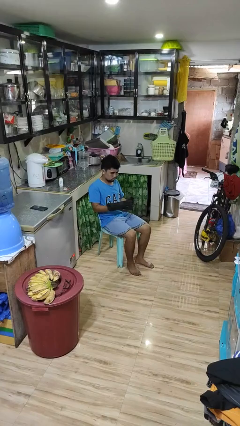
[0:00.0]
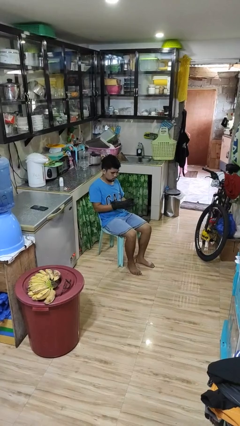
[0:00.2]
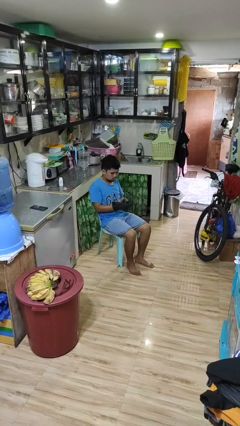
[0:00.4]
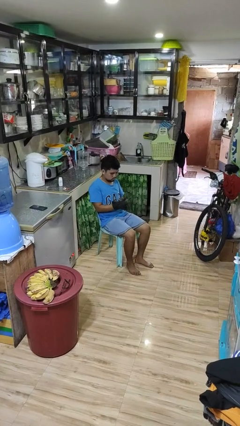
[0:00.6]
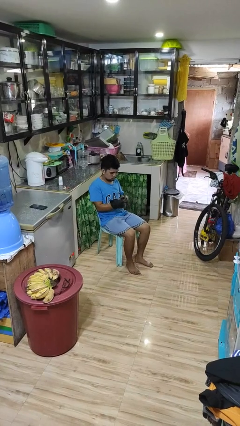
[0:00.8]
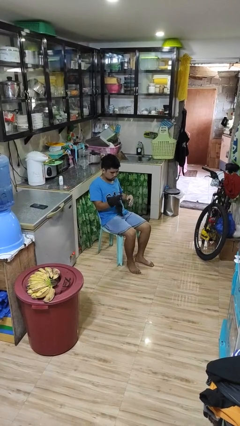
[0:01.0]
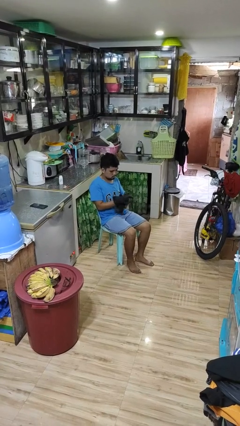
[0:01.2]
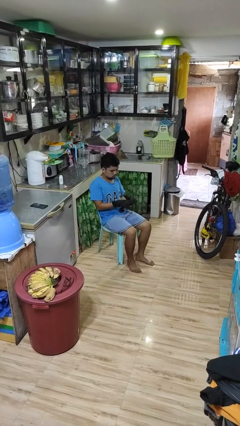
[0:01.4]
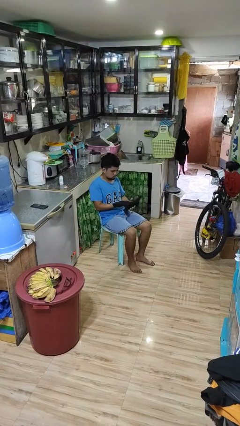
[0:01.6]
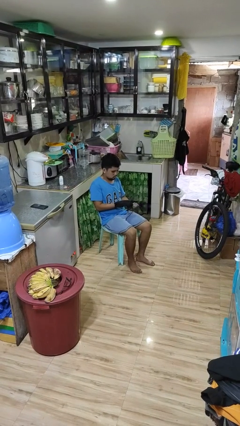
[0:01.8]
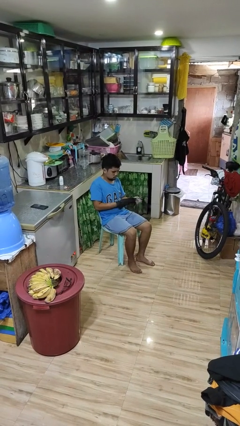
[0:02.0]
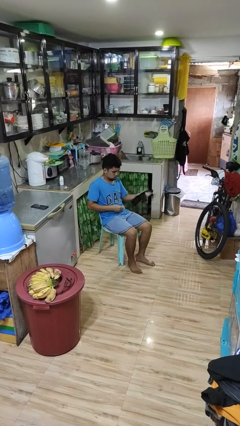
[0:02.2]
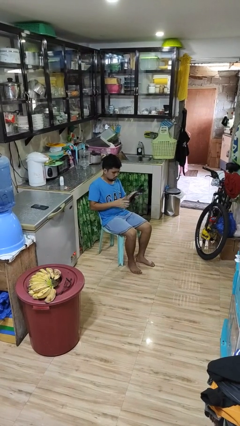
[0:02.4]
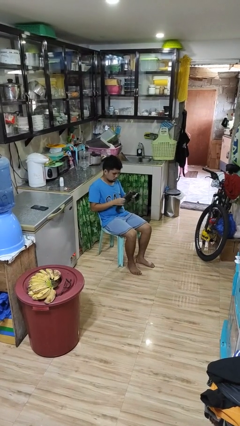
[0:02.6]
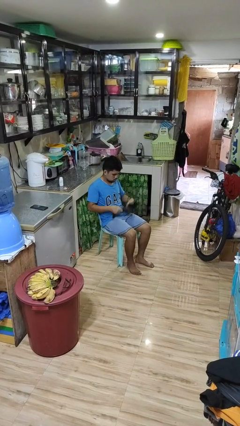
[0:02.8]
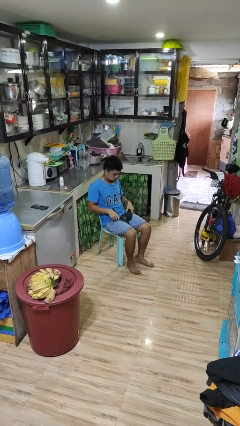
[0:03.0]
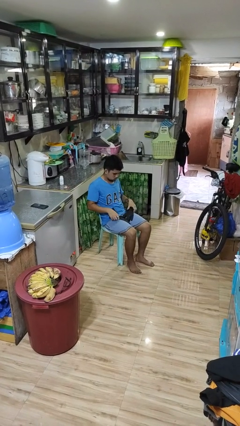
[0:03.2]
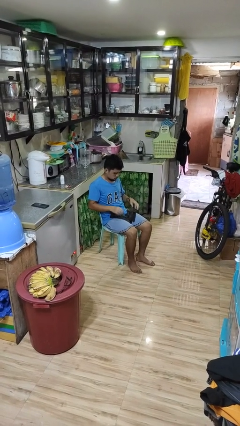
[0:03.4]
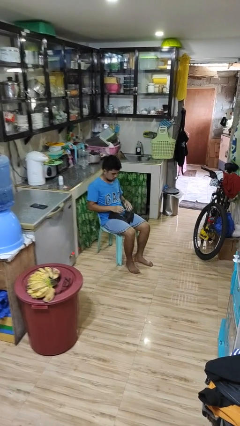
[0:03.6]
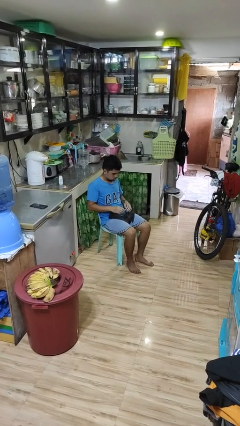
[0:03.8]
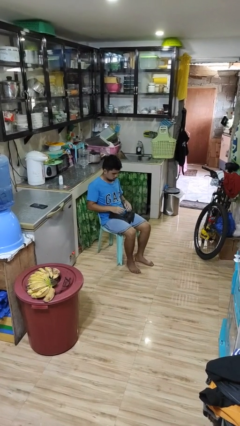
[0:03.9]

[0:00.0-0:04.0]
person takes off gloves

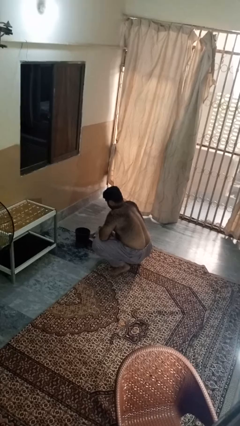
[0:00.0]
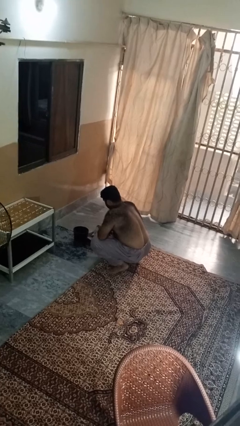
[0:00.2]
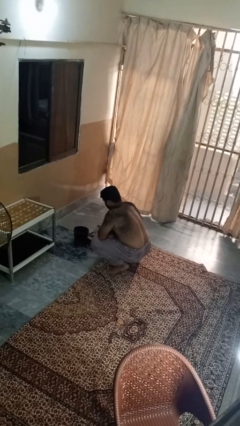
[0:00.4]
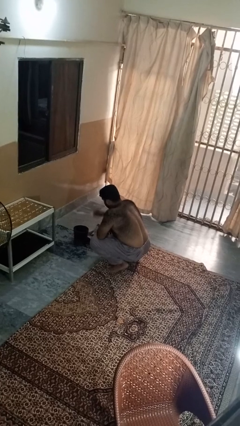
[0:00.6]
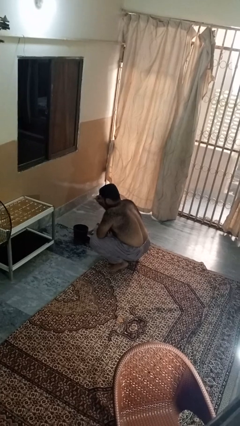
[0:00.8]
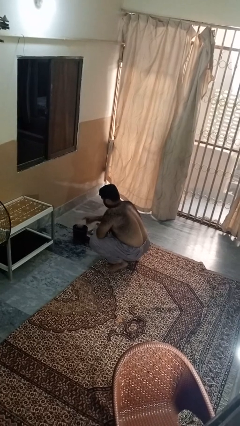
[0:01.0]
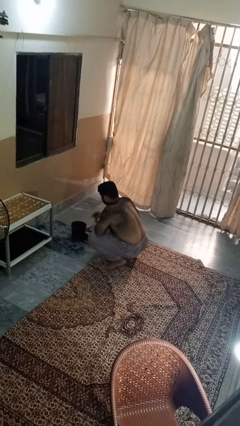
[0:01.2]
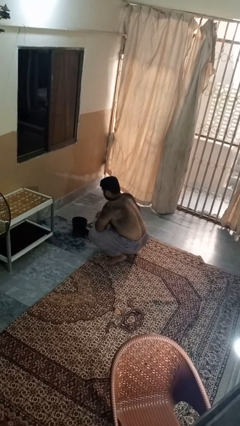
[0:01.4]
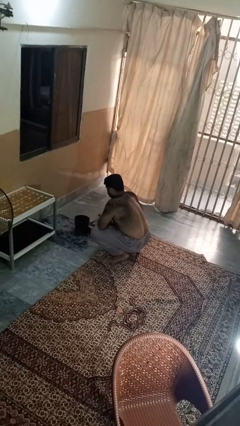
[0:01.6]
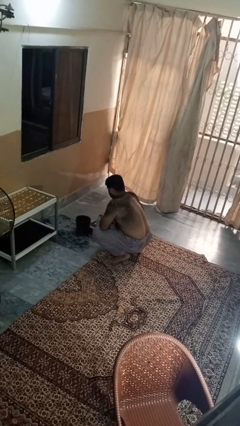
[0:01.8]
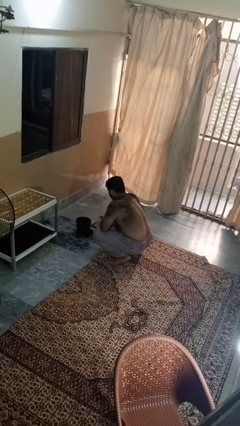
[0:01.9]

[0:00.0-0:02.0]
person discards trash

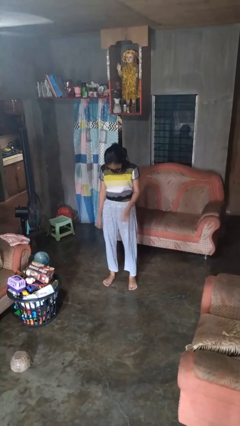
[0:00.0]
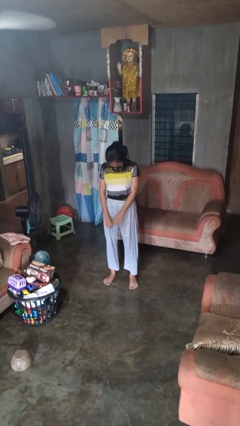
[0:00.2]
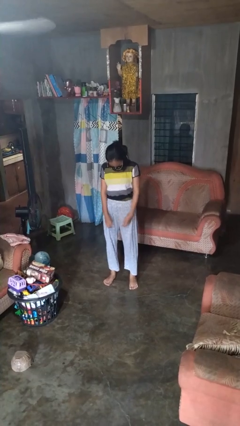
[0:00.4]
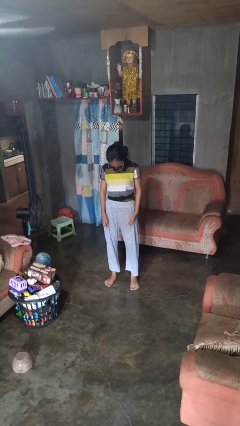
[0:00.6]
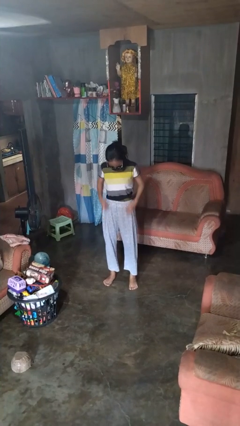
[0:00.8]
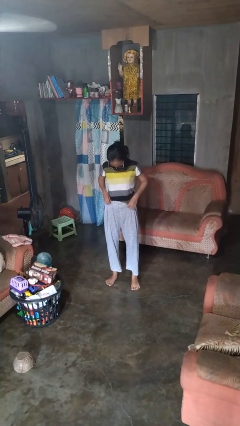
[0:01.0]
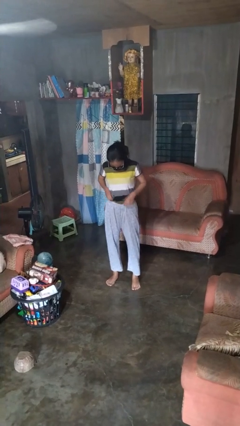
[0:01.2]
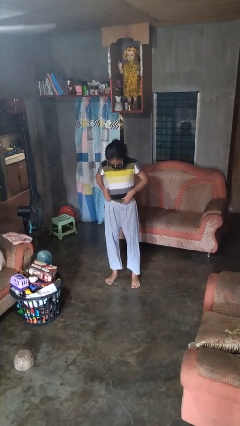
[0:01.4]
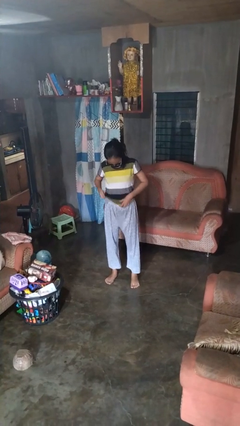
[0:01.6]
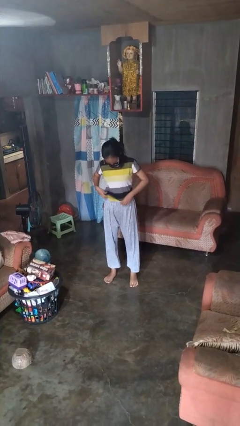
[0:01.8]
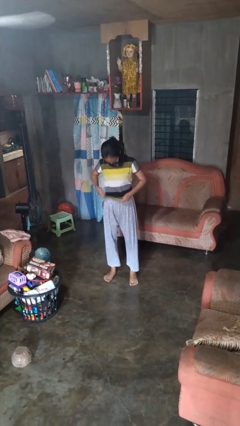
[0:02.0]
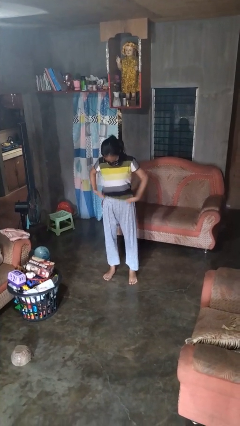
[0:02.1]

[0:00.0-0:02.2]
person untucks shirt

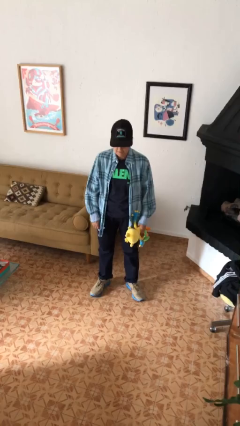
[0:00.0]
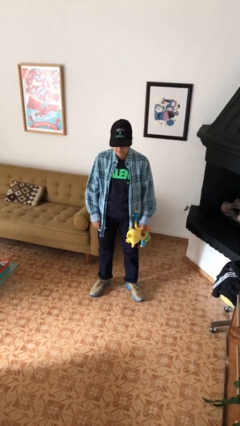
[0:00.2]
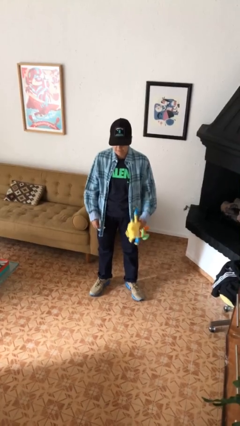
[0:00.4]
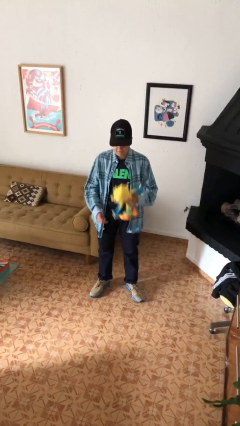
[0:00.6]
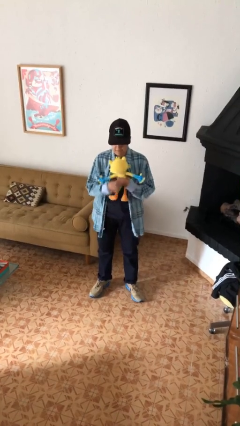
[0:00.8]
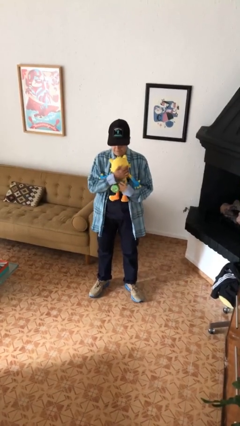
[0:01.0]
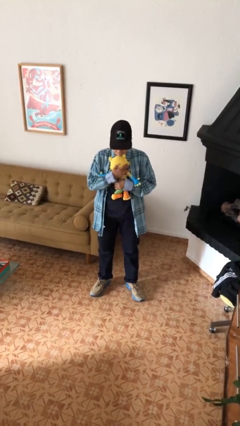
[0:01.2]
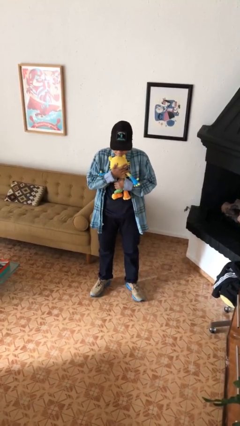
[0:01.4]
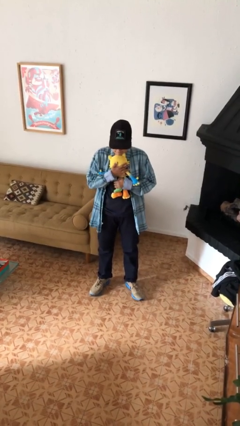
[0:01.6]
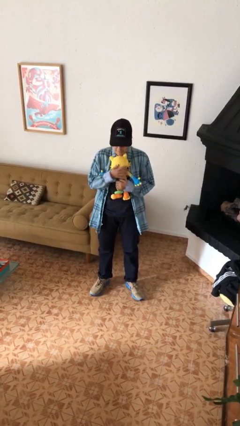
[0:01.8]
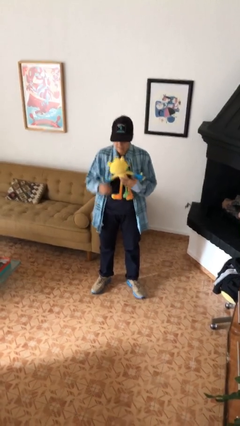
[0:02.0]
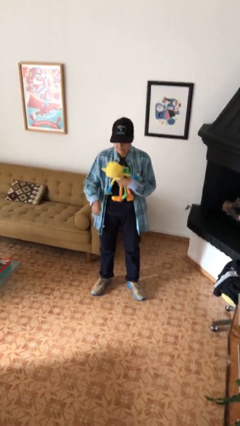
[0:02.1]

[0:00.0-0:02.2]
person hugs stuffed animal

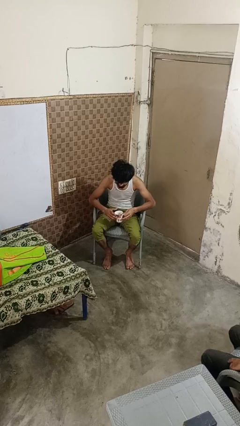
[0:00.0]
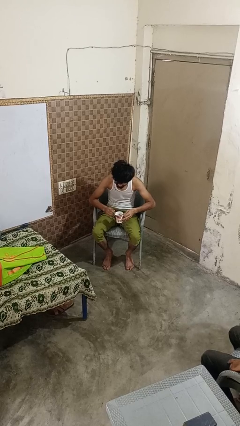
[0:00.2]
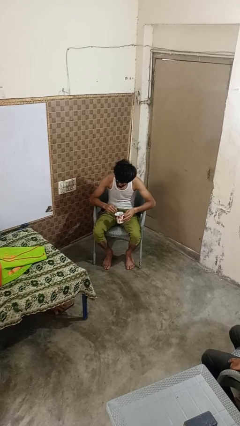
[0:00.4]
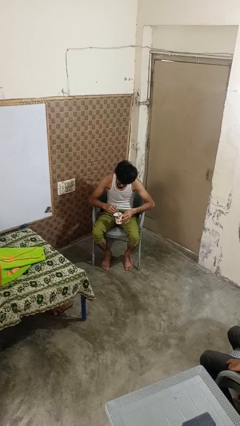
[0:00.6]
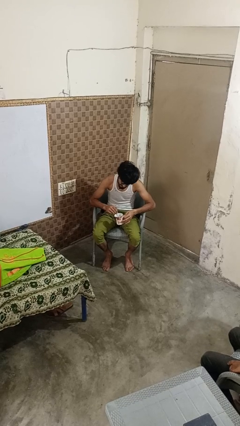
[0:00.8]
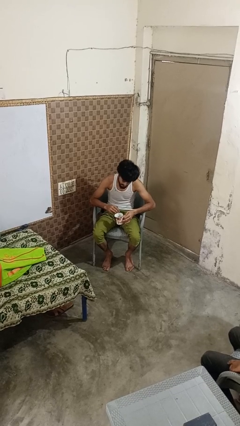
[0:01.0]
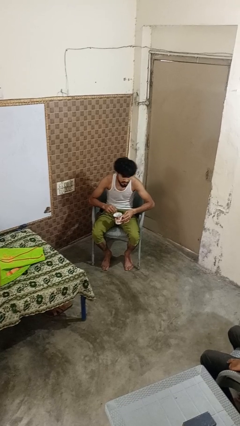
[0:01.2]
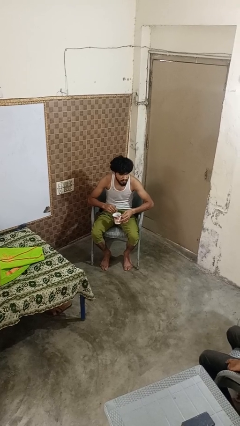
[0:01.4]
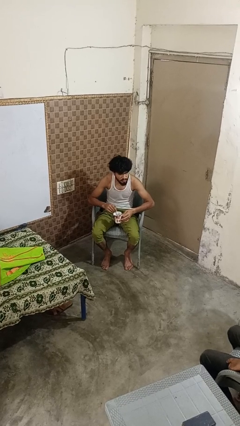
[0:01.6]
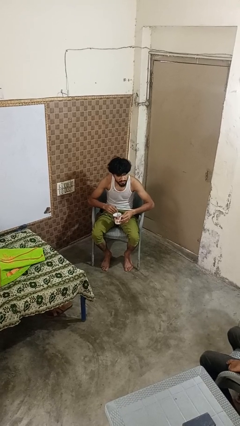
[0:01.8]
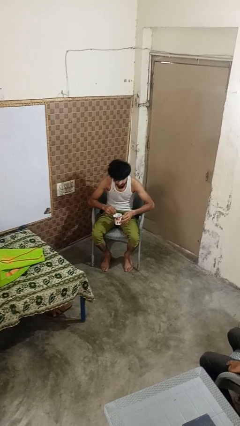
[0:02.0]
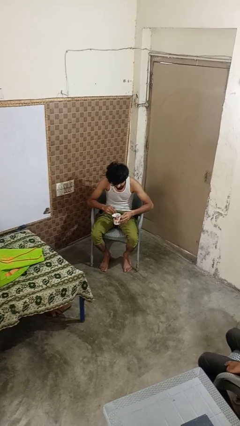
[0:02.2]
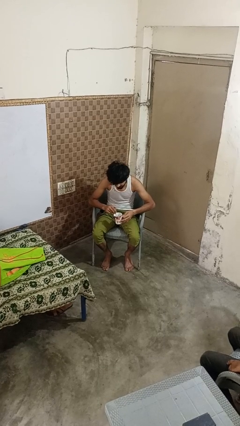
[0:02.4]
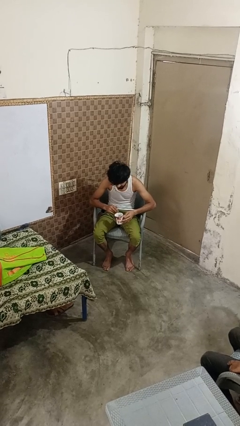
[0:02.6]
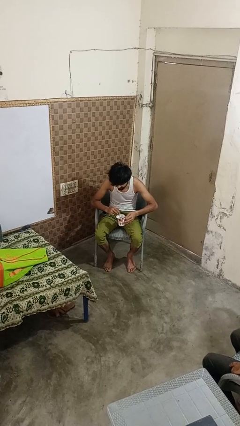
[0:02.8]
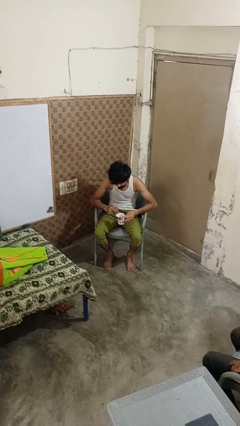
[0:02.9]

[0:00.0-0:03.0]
person stirs mug

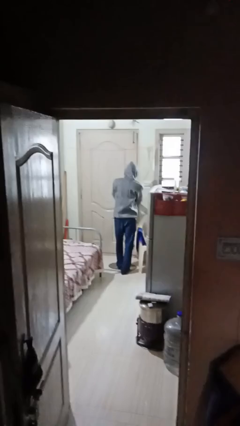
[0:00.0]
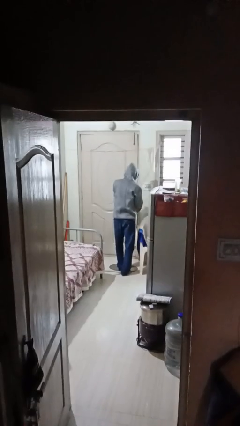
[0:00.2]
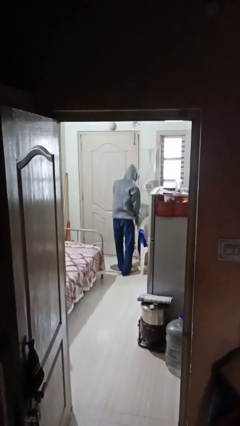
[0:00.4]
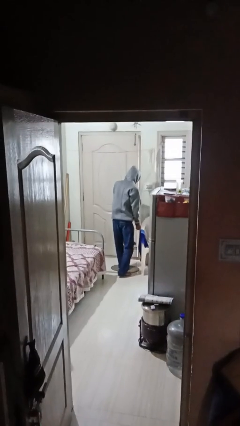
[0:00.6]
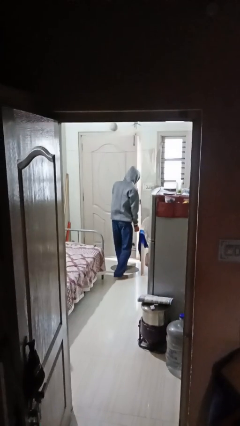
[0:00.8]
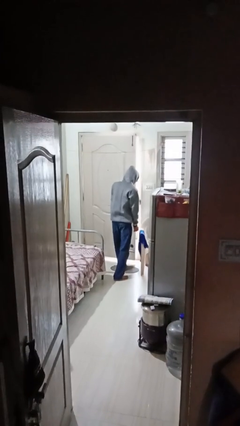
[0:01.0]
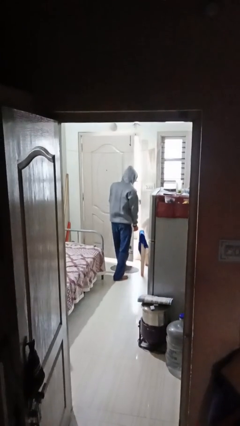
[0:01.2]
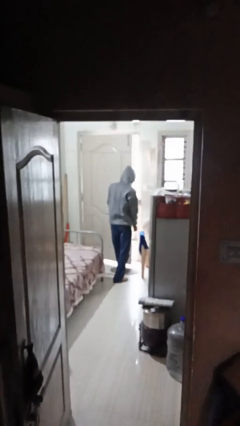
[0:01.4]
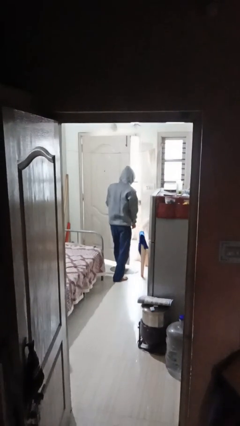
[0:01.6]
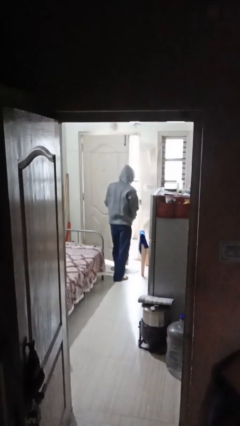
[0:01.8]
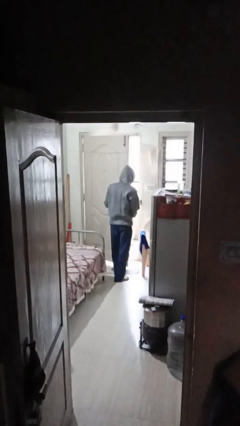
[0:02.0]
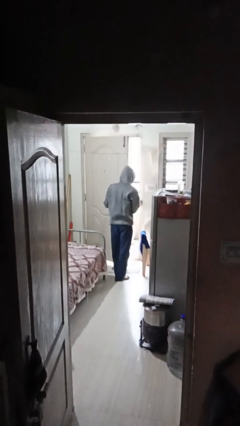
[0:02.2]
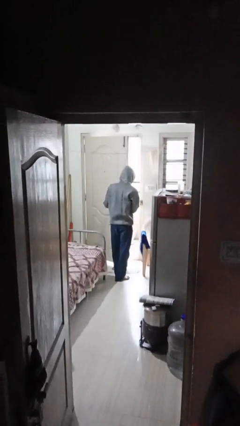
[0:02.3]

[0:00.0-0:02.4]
person opens facility door

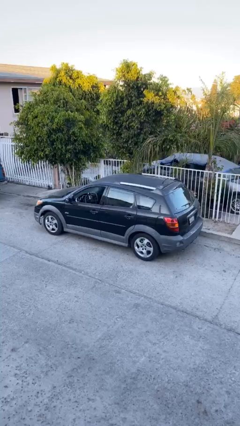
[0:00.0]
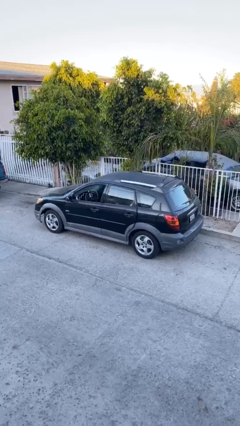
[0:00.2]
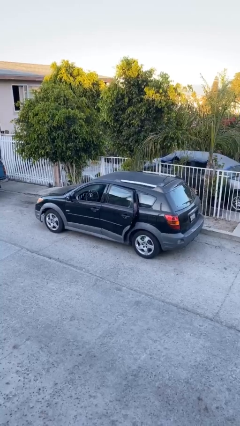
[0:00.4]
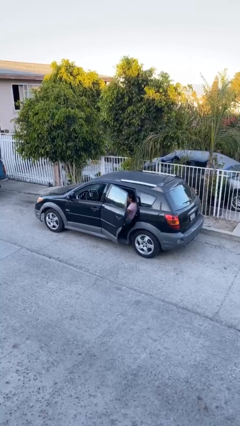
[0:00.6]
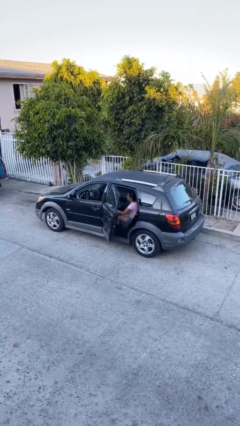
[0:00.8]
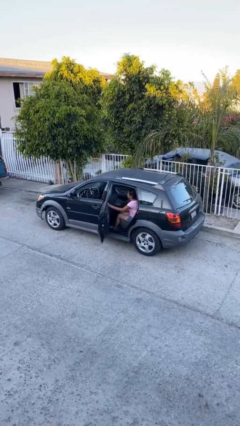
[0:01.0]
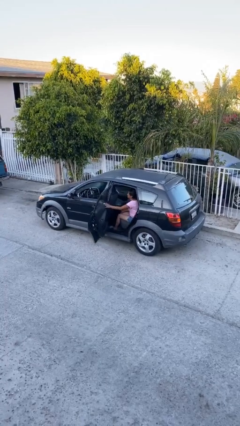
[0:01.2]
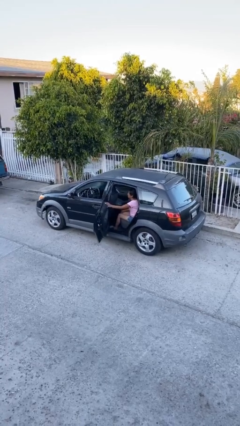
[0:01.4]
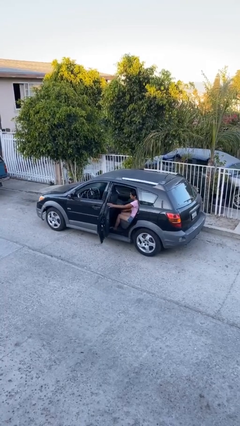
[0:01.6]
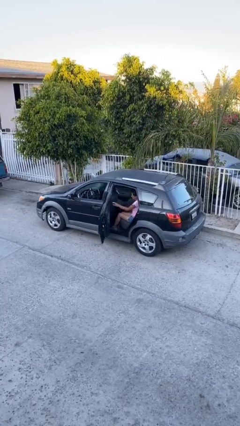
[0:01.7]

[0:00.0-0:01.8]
person opens car door
